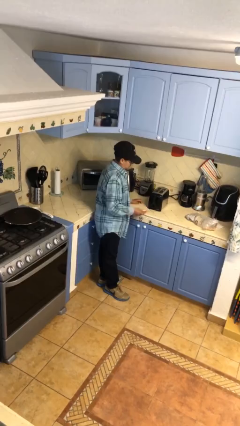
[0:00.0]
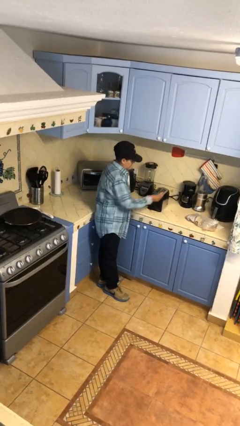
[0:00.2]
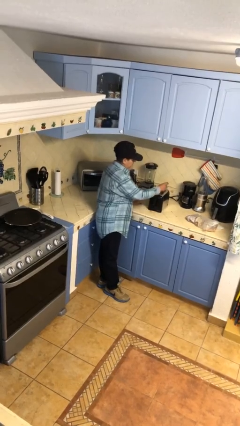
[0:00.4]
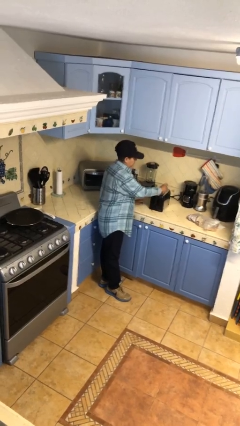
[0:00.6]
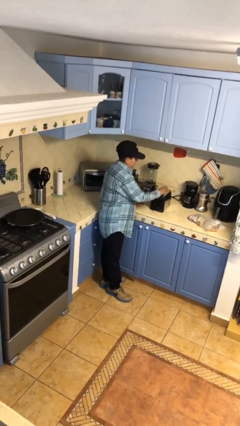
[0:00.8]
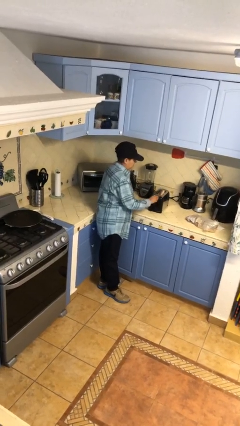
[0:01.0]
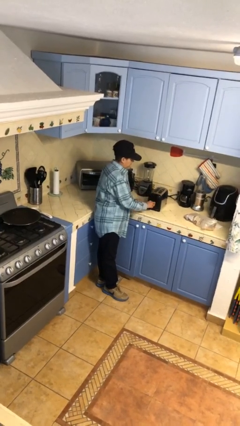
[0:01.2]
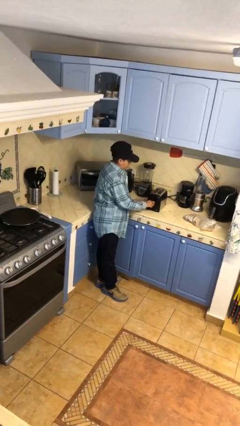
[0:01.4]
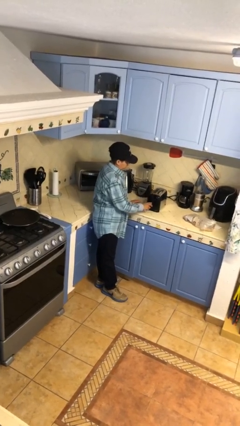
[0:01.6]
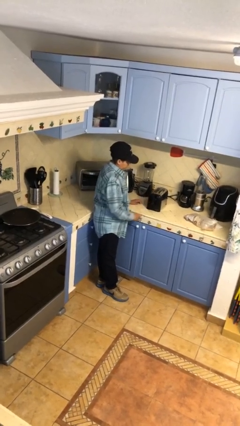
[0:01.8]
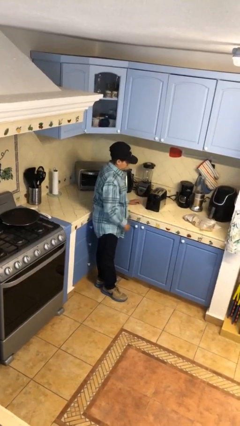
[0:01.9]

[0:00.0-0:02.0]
person puts object into toaster

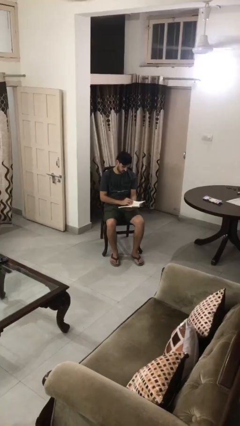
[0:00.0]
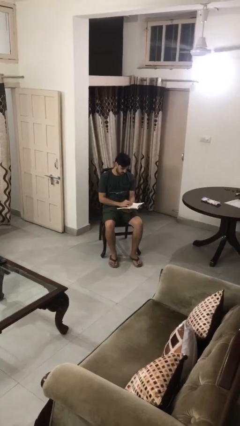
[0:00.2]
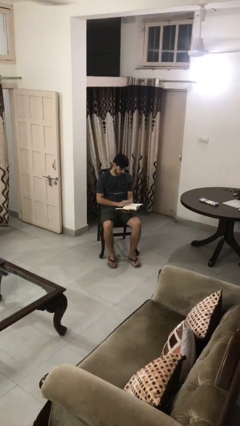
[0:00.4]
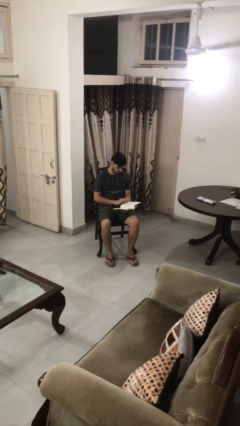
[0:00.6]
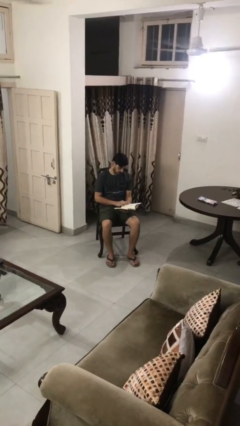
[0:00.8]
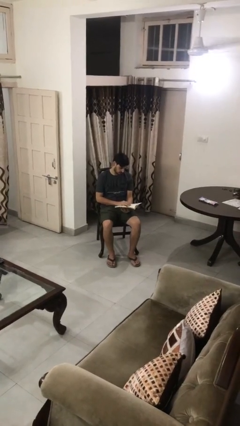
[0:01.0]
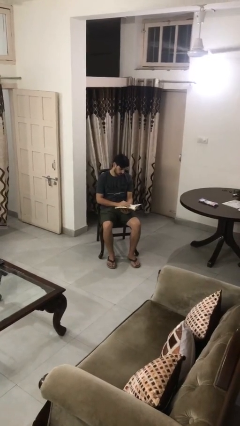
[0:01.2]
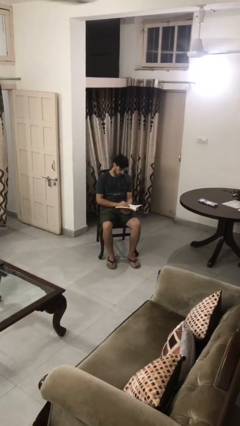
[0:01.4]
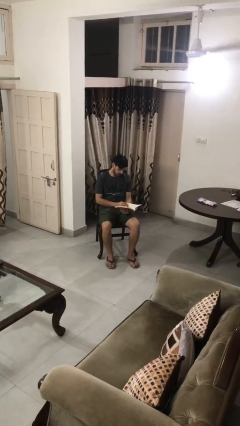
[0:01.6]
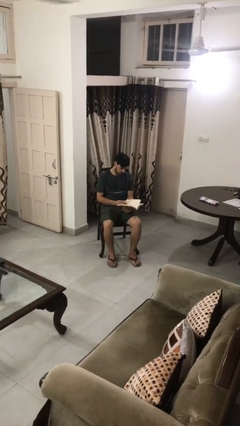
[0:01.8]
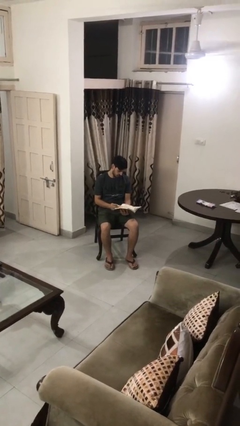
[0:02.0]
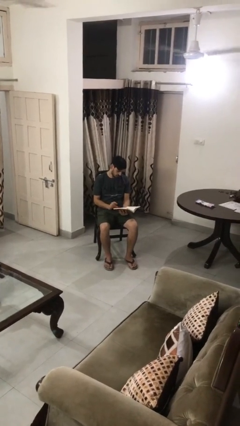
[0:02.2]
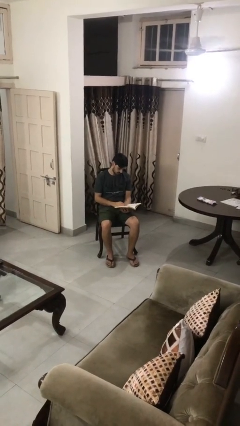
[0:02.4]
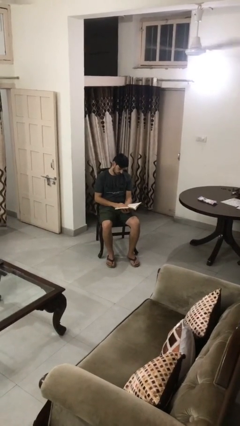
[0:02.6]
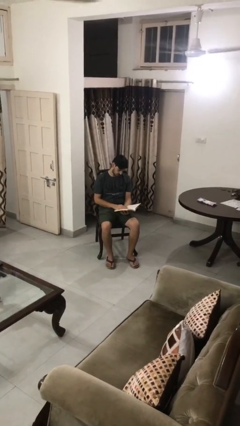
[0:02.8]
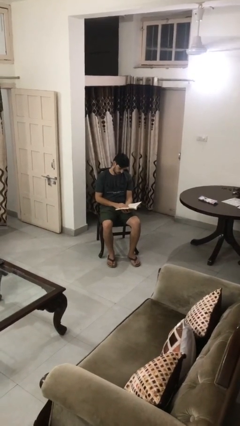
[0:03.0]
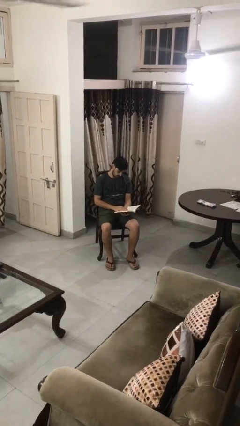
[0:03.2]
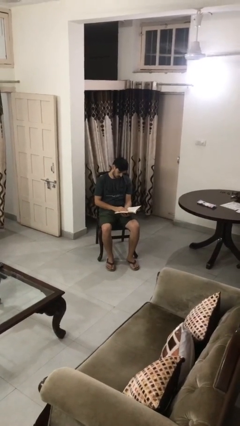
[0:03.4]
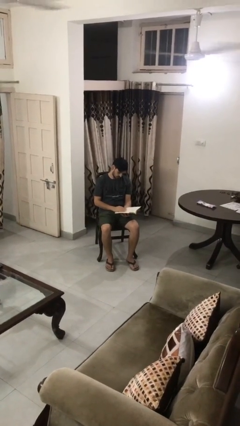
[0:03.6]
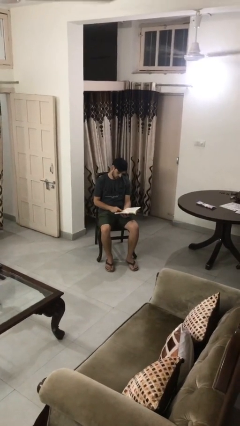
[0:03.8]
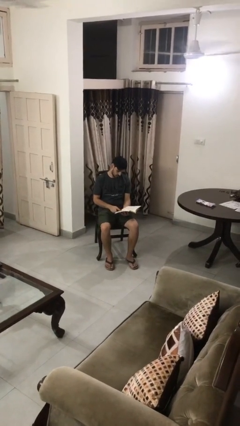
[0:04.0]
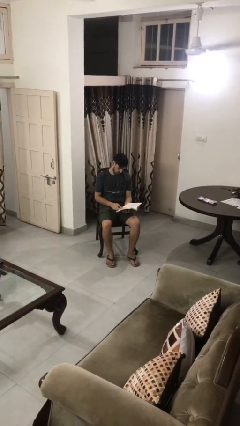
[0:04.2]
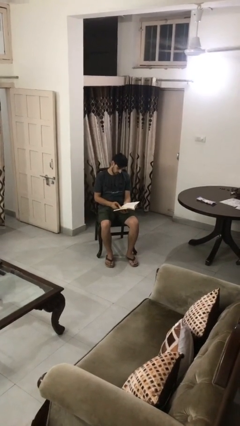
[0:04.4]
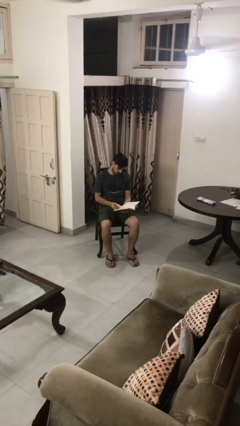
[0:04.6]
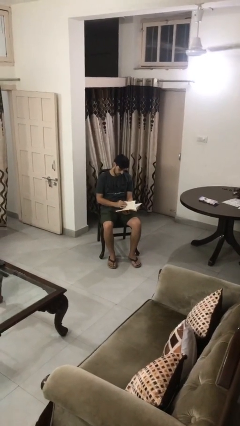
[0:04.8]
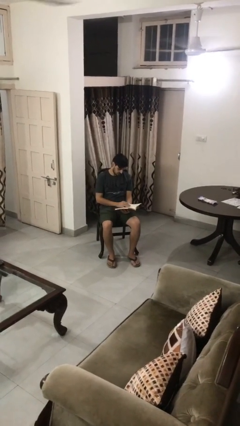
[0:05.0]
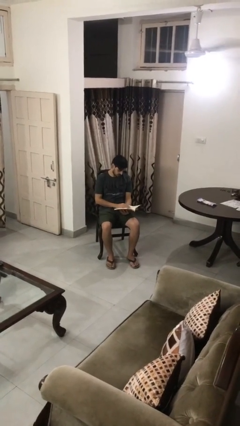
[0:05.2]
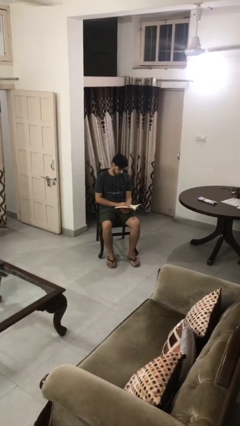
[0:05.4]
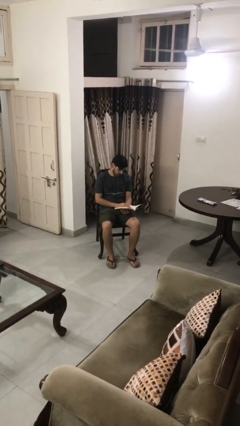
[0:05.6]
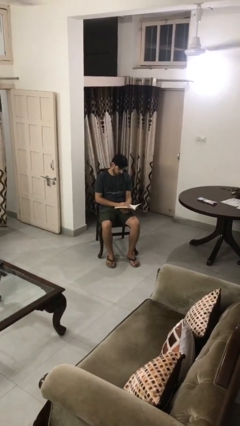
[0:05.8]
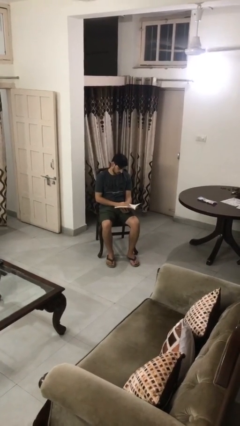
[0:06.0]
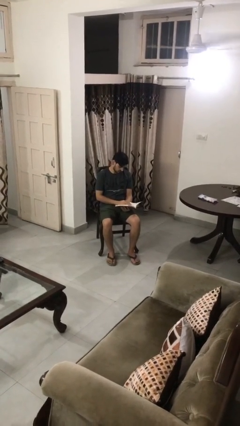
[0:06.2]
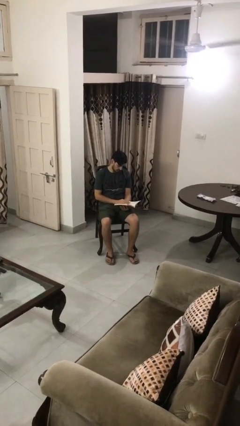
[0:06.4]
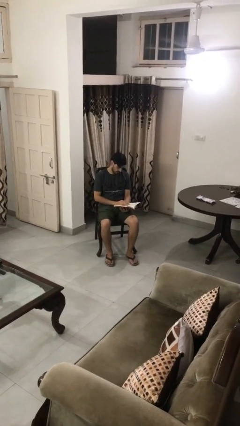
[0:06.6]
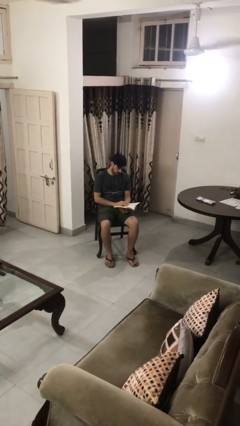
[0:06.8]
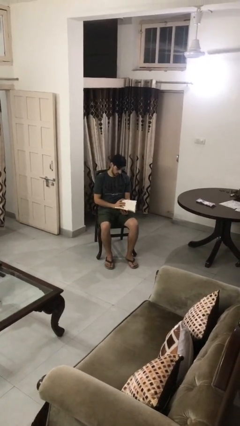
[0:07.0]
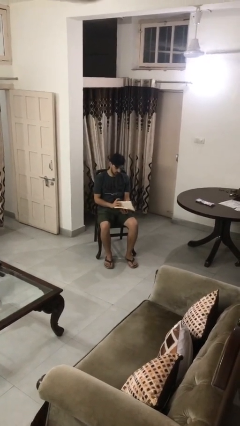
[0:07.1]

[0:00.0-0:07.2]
person reads book

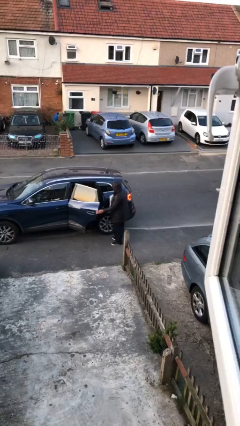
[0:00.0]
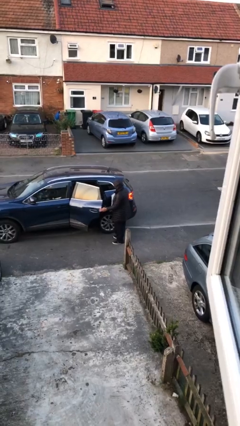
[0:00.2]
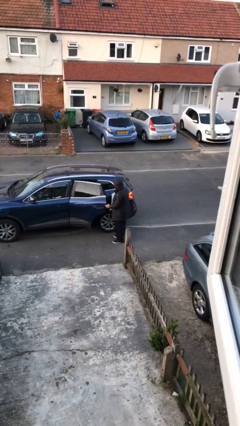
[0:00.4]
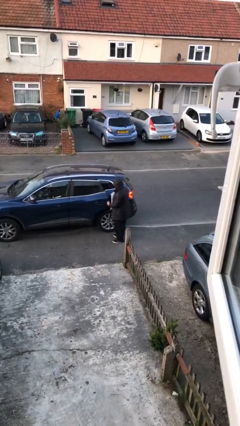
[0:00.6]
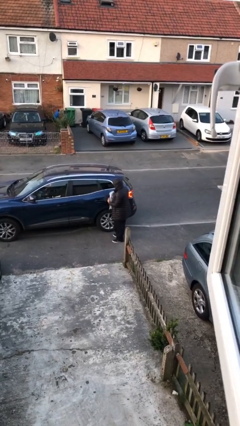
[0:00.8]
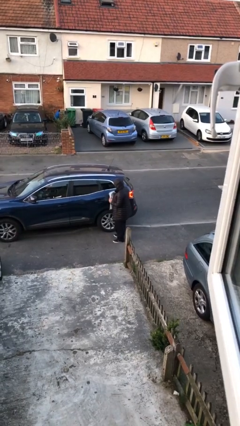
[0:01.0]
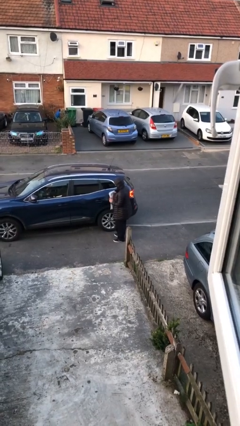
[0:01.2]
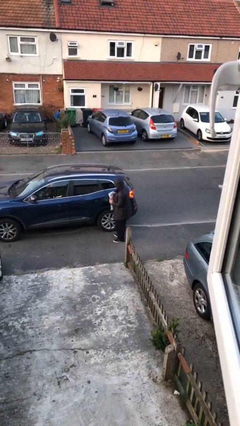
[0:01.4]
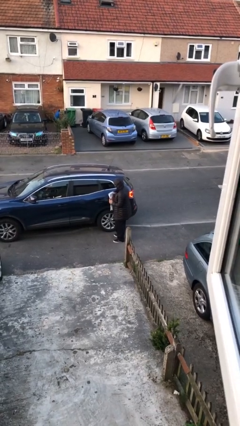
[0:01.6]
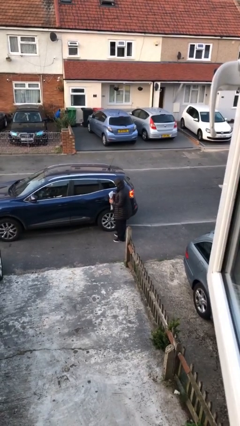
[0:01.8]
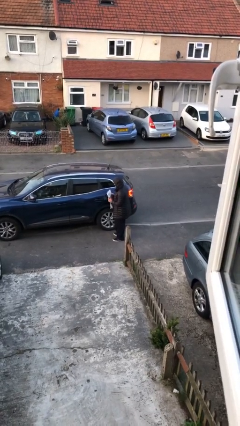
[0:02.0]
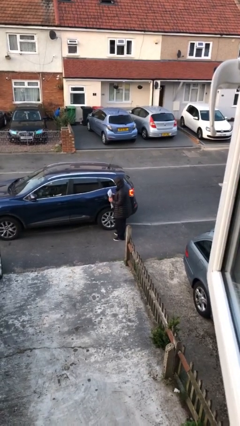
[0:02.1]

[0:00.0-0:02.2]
person closes car door

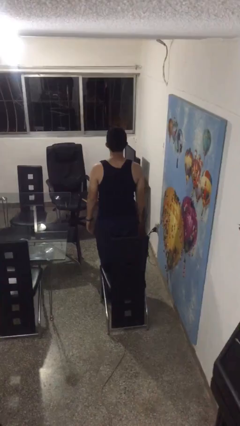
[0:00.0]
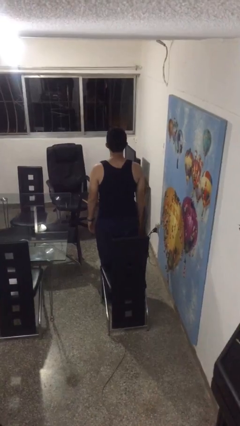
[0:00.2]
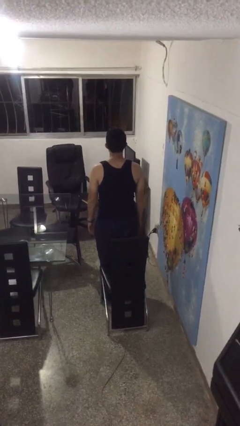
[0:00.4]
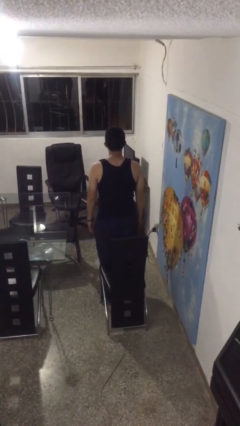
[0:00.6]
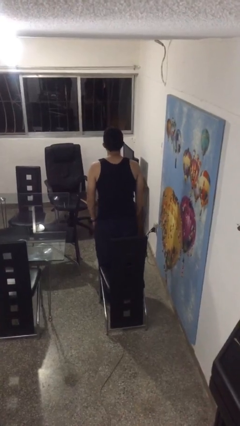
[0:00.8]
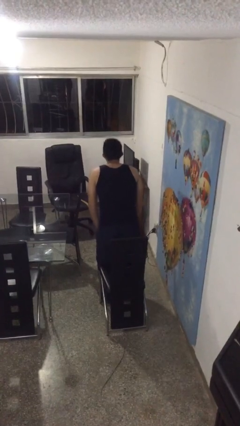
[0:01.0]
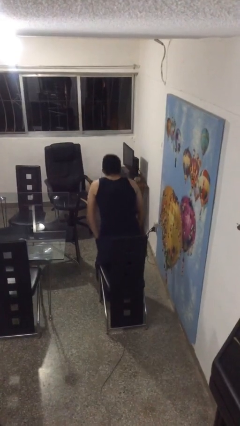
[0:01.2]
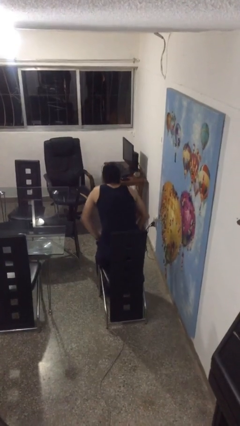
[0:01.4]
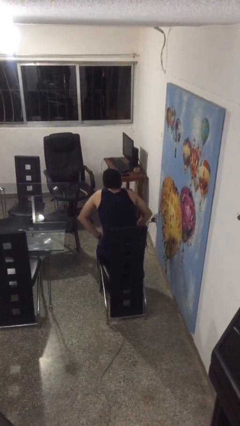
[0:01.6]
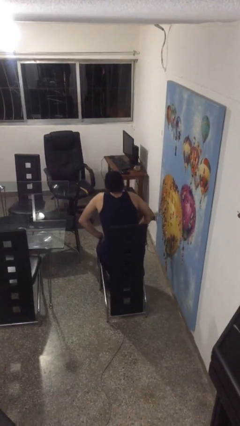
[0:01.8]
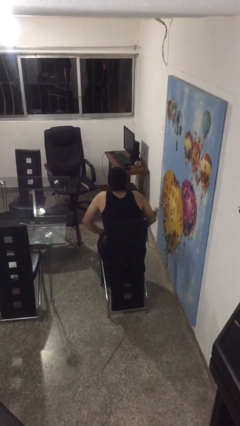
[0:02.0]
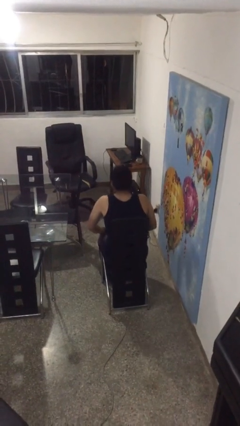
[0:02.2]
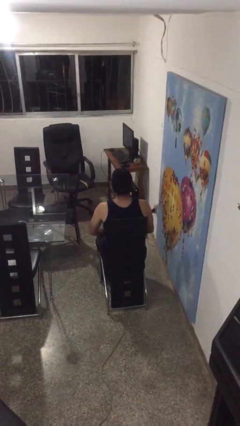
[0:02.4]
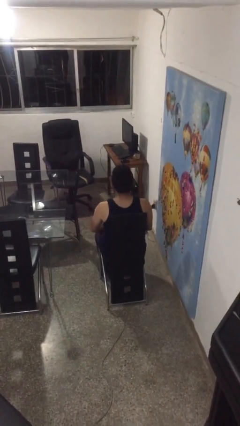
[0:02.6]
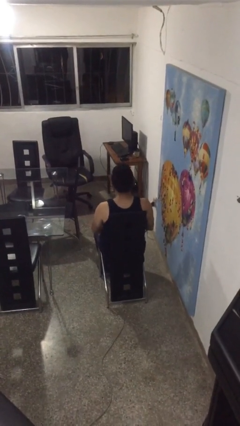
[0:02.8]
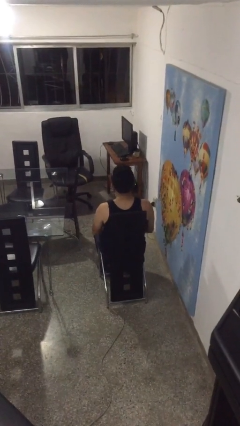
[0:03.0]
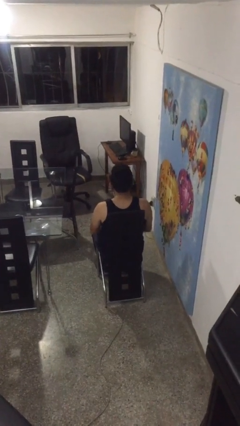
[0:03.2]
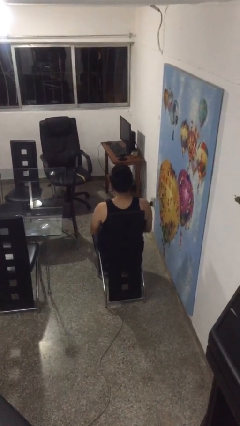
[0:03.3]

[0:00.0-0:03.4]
person sits down

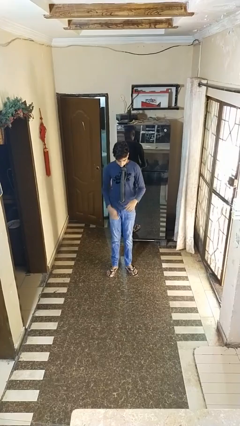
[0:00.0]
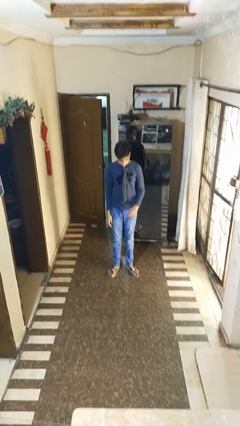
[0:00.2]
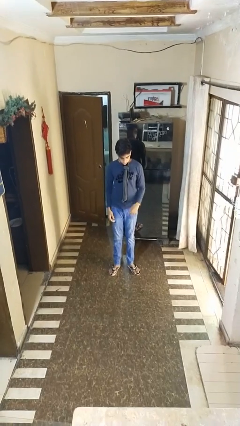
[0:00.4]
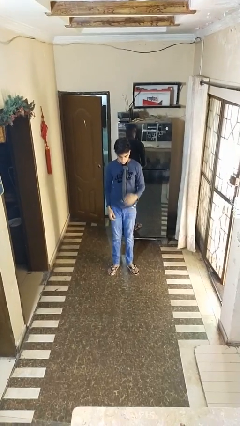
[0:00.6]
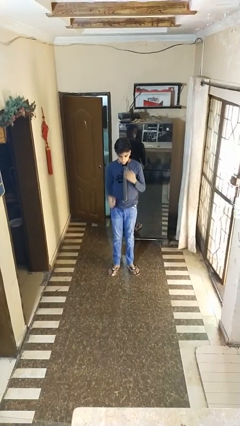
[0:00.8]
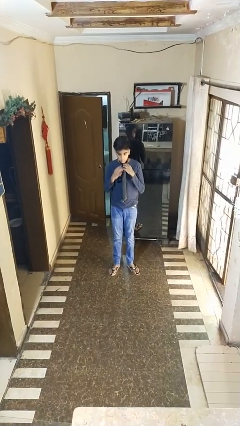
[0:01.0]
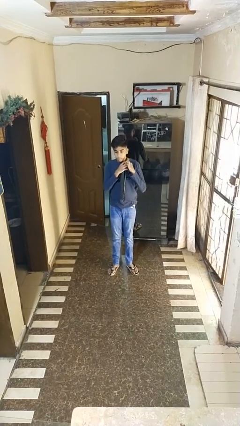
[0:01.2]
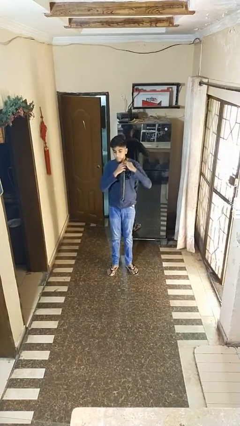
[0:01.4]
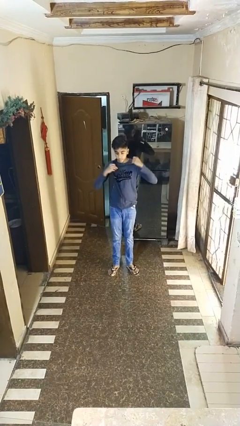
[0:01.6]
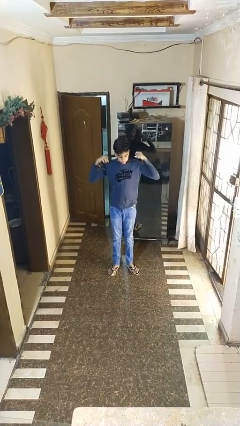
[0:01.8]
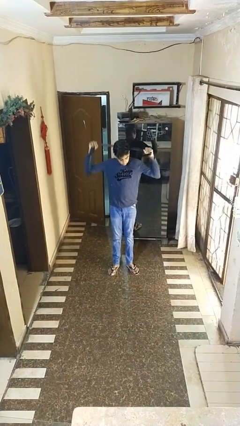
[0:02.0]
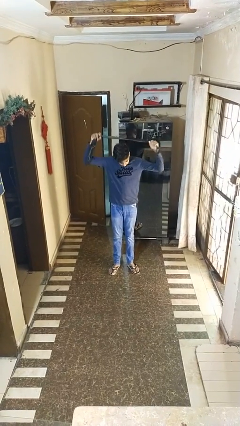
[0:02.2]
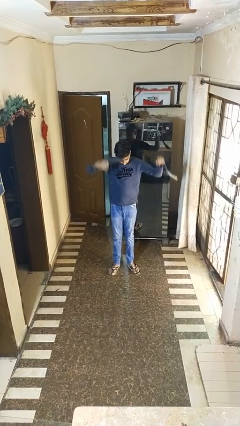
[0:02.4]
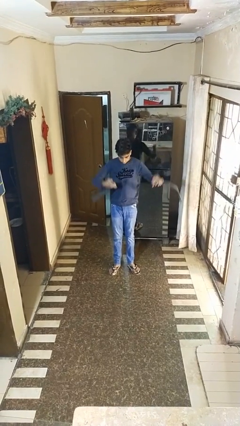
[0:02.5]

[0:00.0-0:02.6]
person takes off necktie

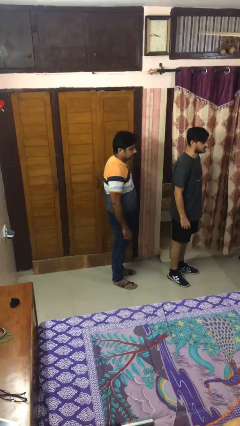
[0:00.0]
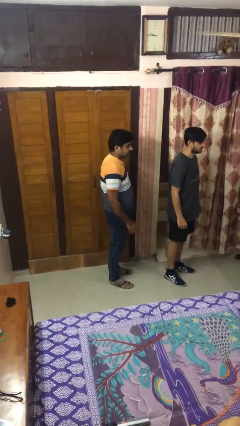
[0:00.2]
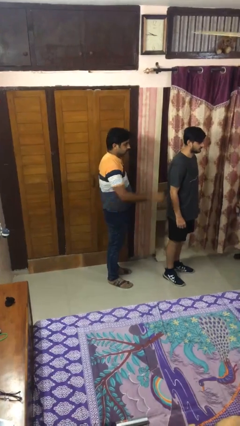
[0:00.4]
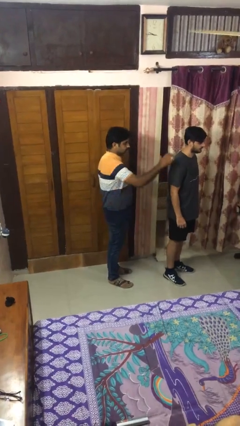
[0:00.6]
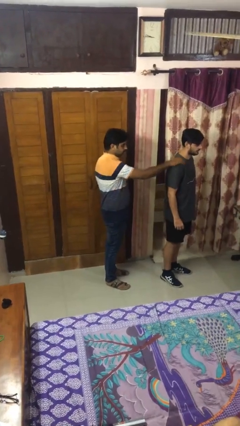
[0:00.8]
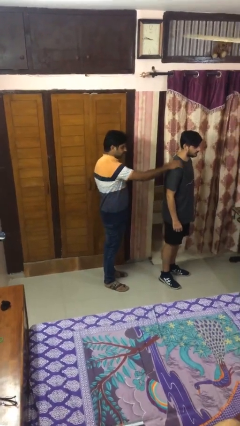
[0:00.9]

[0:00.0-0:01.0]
person grabs person by shoulder
